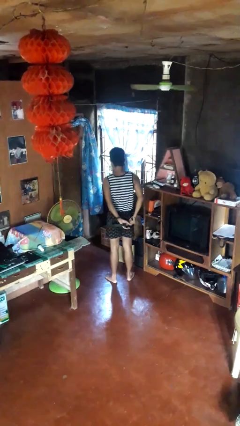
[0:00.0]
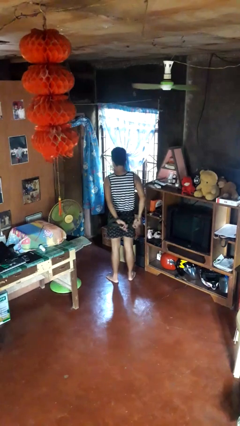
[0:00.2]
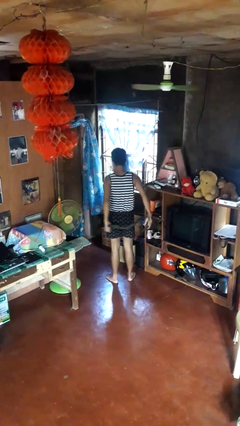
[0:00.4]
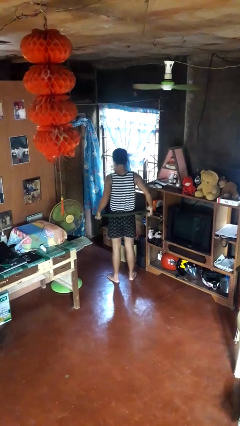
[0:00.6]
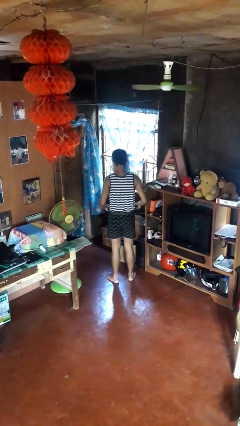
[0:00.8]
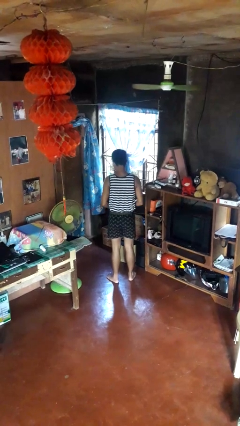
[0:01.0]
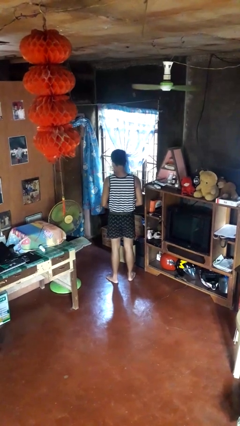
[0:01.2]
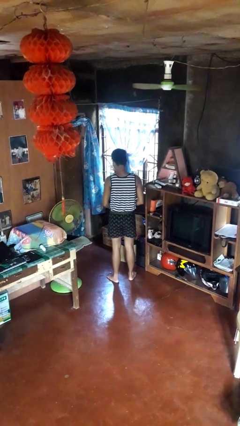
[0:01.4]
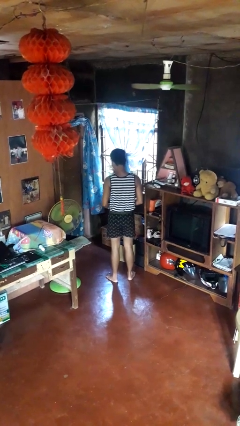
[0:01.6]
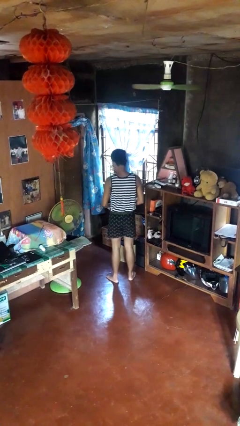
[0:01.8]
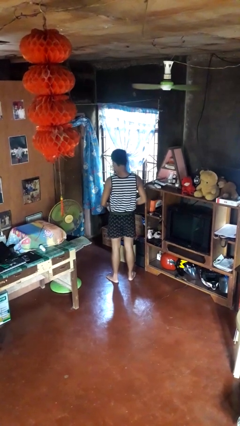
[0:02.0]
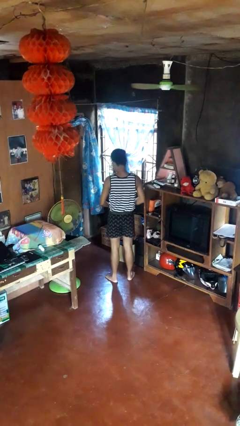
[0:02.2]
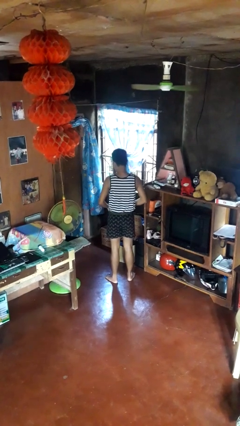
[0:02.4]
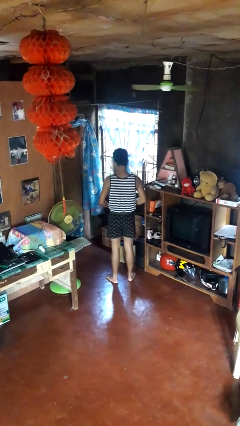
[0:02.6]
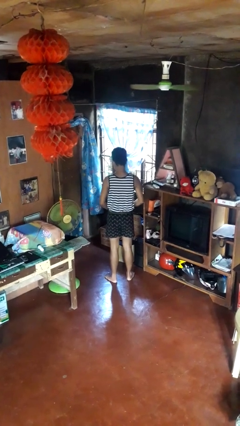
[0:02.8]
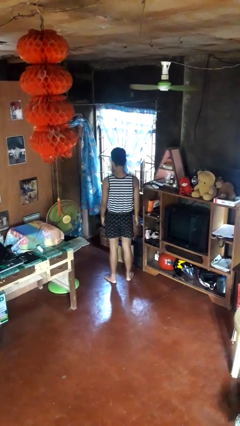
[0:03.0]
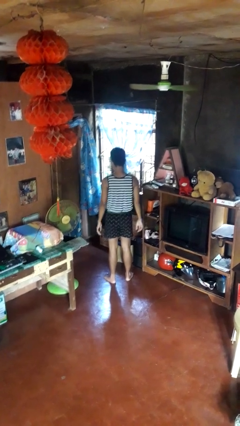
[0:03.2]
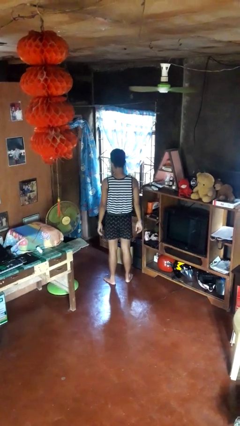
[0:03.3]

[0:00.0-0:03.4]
person puts on belt

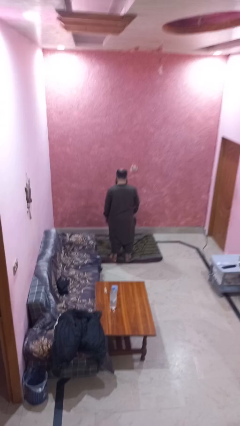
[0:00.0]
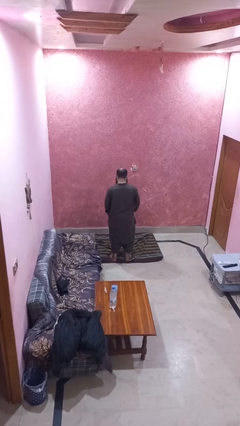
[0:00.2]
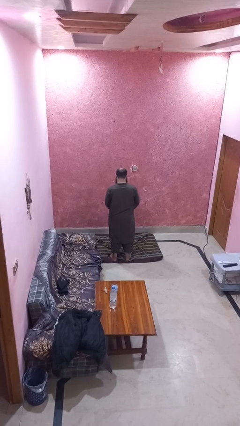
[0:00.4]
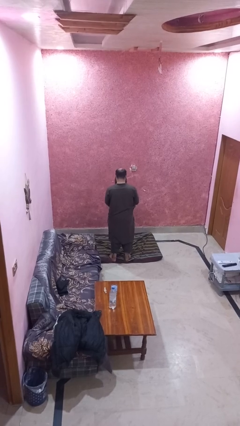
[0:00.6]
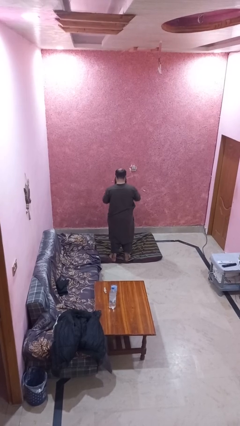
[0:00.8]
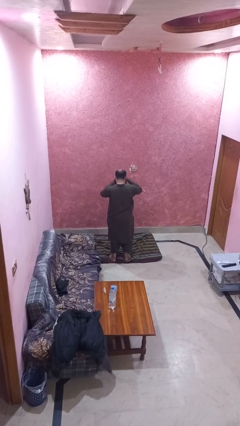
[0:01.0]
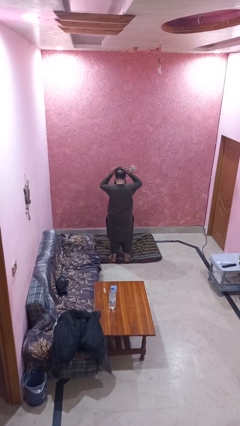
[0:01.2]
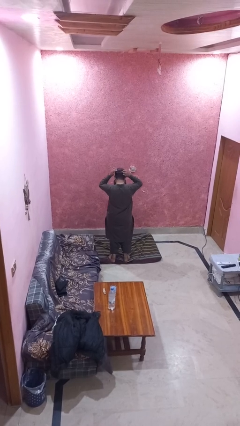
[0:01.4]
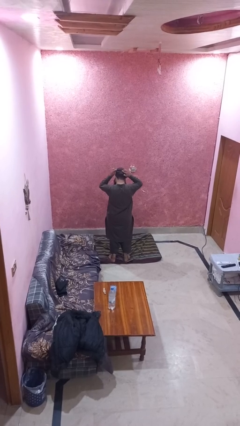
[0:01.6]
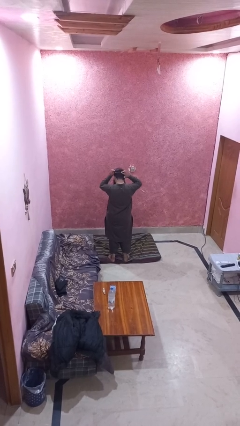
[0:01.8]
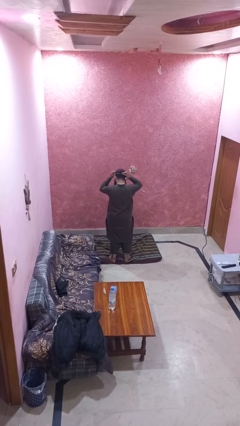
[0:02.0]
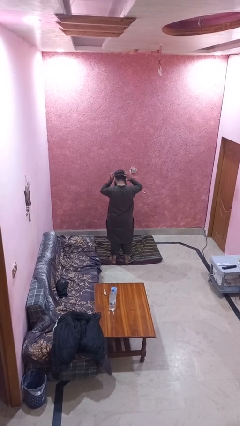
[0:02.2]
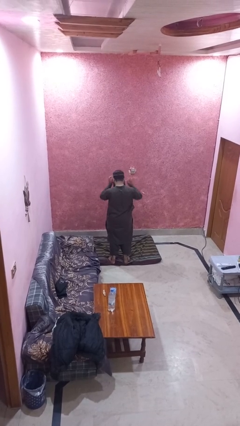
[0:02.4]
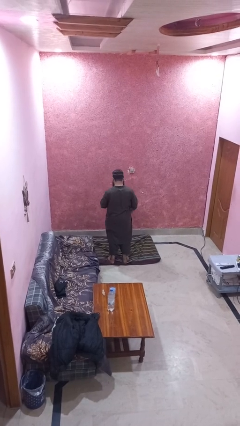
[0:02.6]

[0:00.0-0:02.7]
person puts on hat

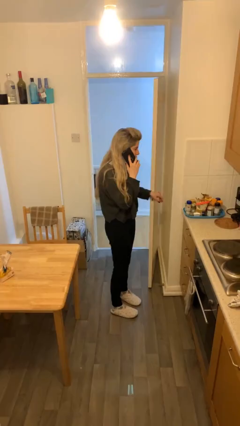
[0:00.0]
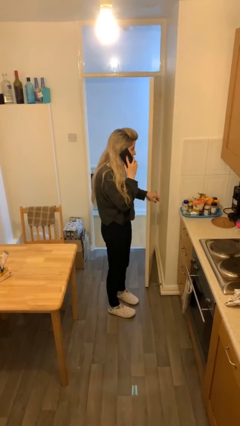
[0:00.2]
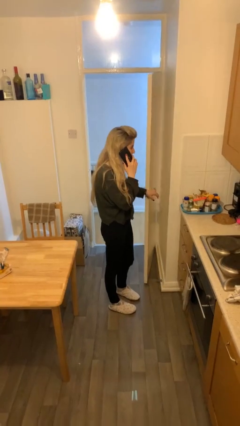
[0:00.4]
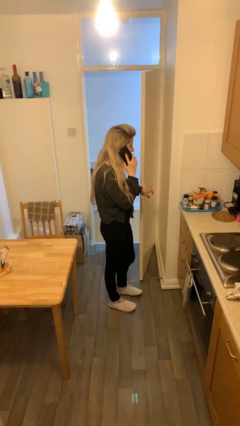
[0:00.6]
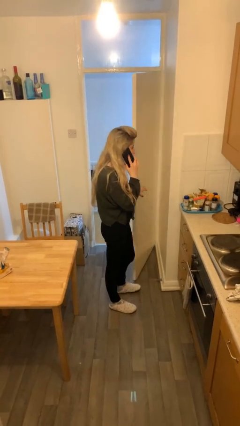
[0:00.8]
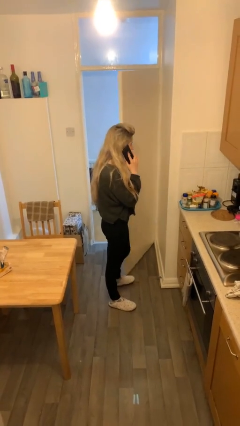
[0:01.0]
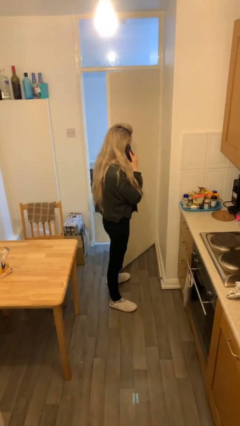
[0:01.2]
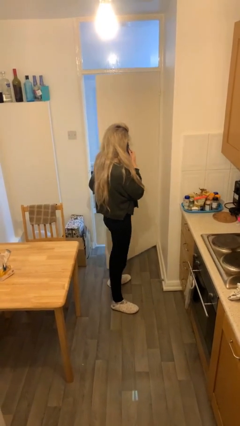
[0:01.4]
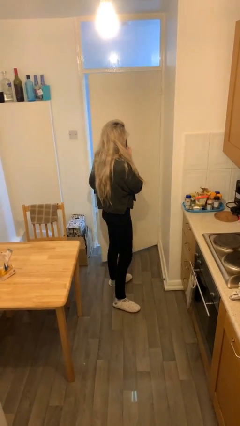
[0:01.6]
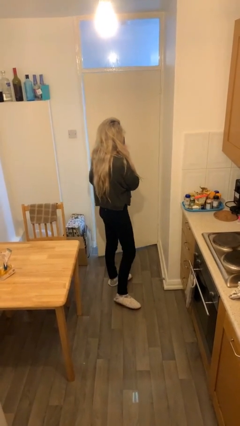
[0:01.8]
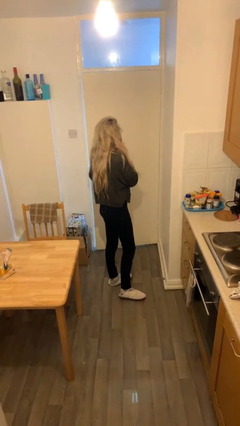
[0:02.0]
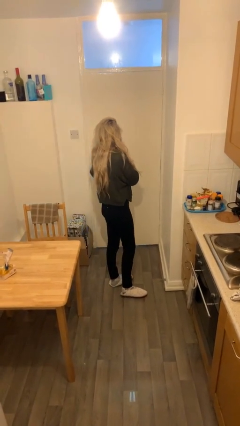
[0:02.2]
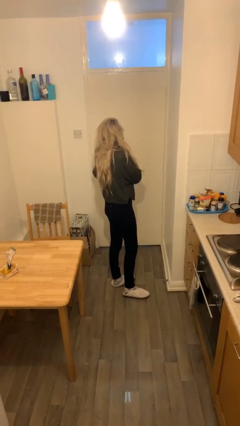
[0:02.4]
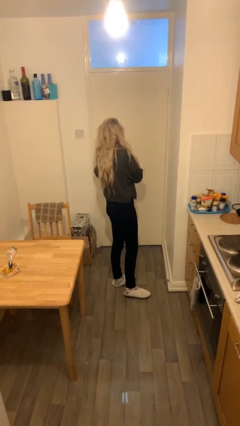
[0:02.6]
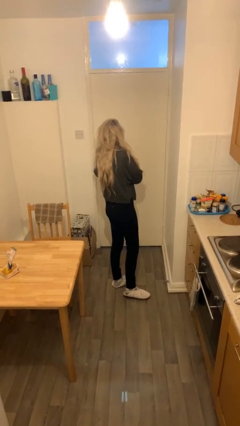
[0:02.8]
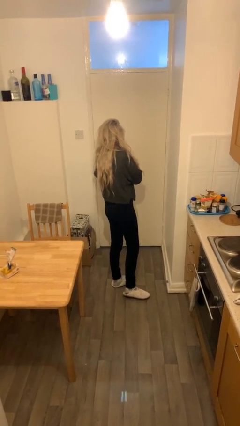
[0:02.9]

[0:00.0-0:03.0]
person closes facility door

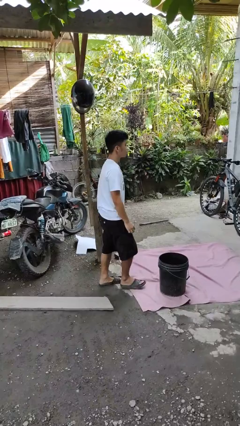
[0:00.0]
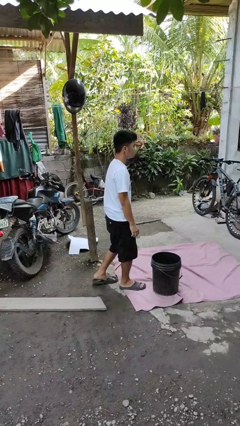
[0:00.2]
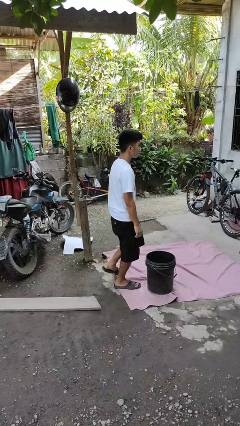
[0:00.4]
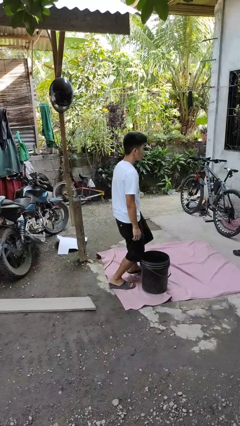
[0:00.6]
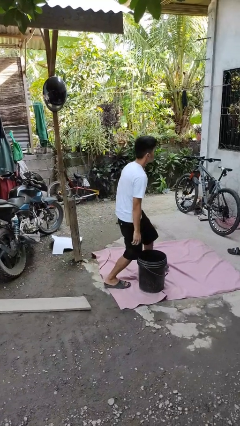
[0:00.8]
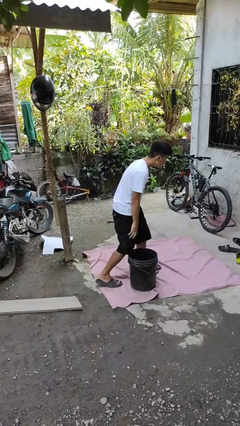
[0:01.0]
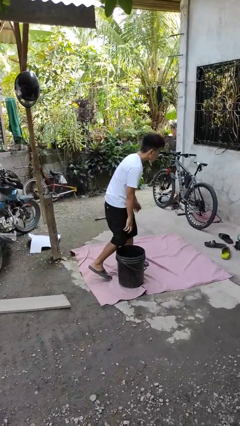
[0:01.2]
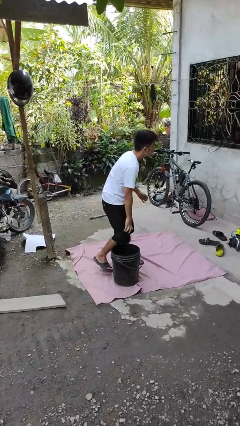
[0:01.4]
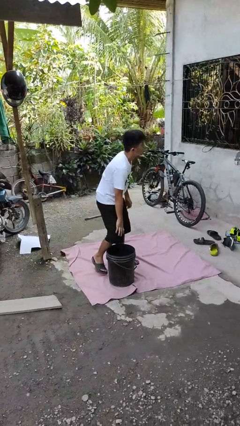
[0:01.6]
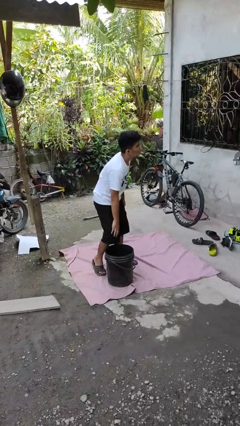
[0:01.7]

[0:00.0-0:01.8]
person trips on object on floor

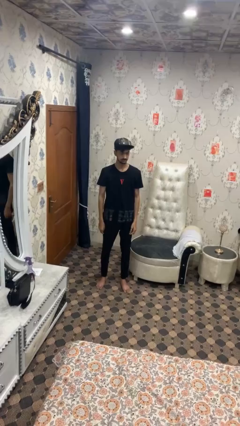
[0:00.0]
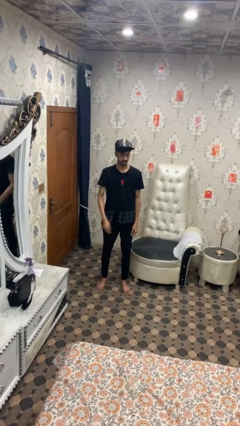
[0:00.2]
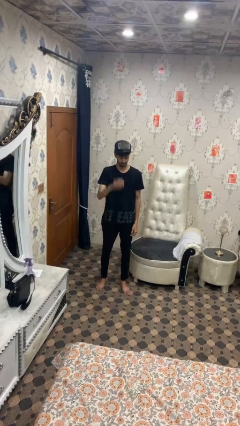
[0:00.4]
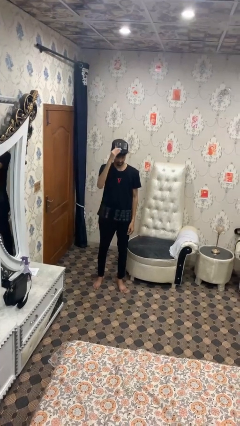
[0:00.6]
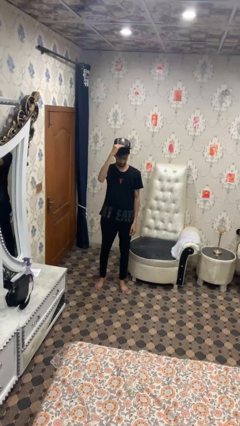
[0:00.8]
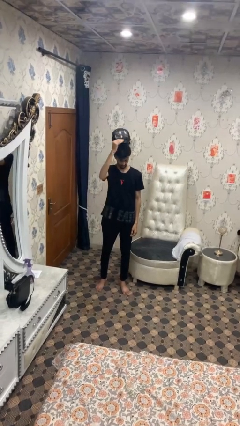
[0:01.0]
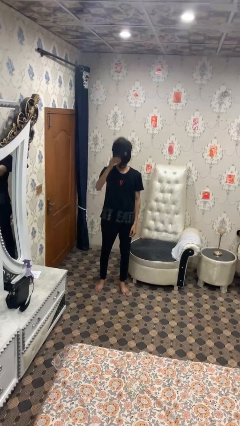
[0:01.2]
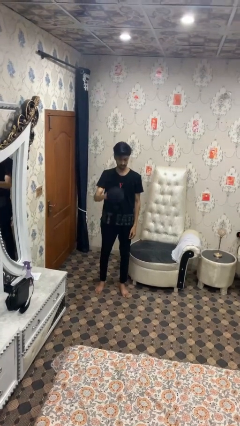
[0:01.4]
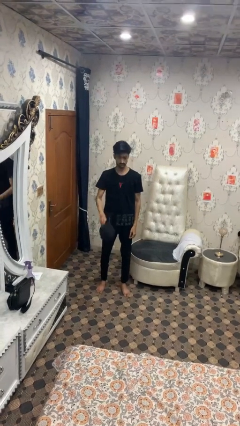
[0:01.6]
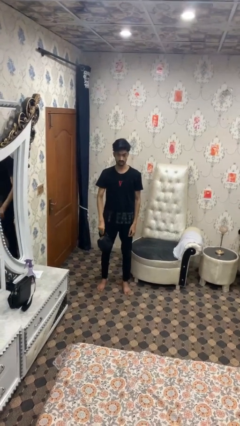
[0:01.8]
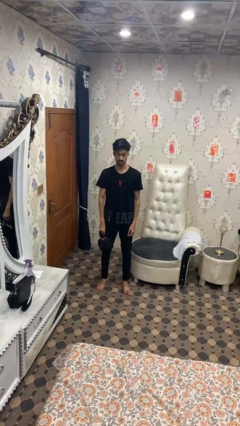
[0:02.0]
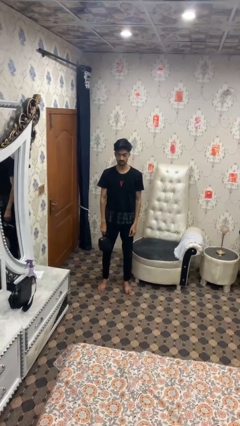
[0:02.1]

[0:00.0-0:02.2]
person takes off hat

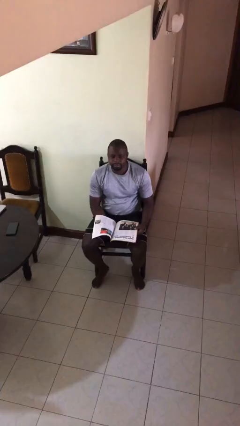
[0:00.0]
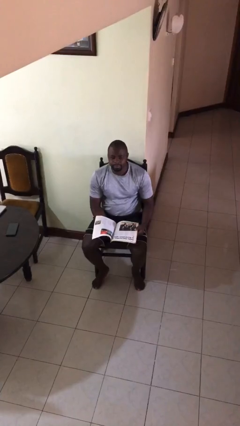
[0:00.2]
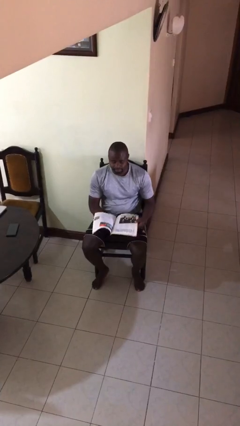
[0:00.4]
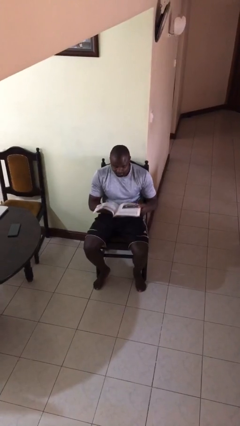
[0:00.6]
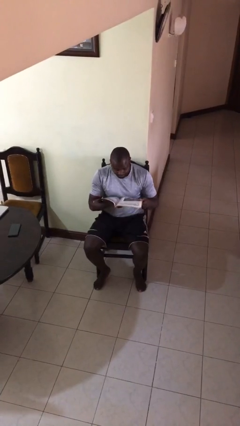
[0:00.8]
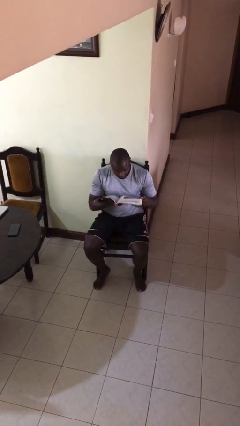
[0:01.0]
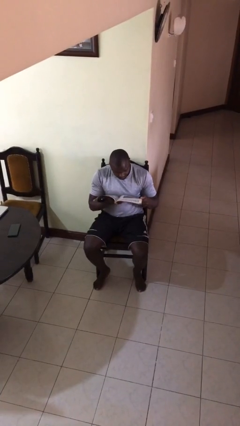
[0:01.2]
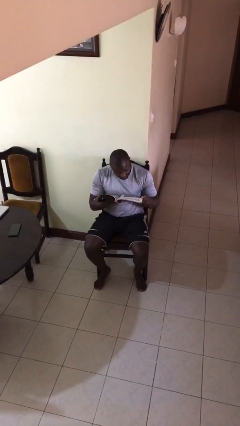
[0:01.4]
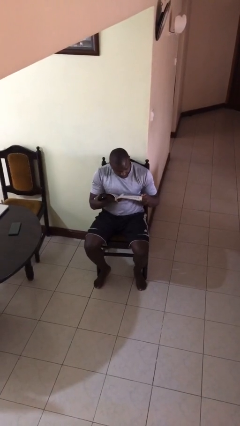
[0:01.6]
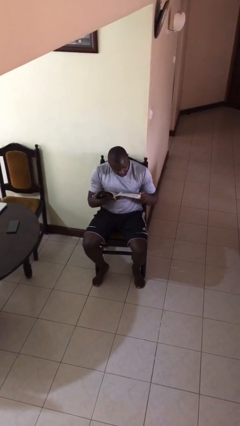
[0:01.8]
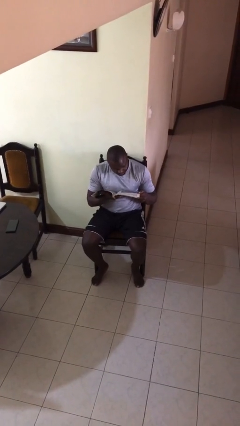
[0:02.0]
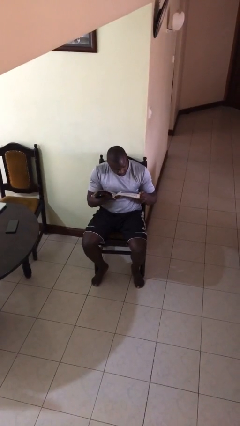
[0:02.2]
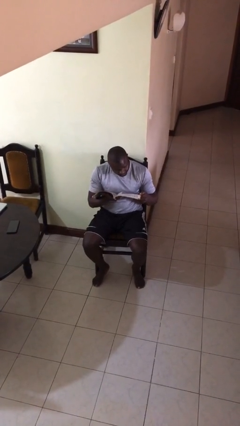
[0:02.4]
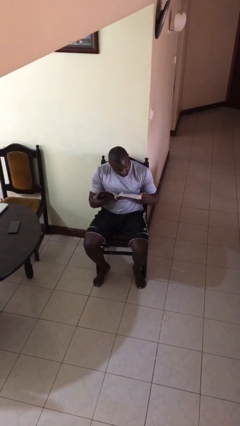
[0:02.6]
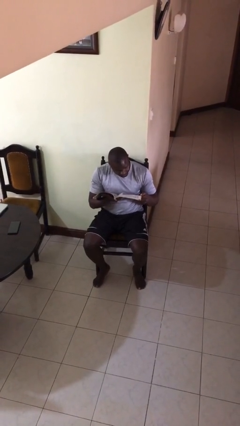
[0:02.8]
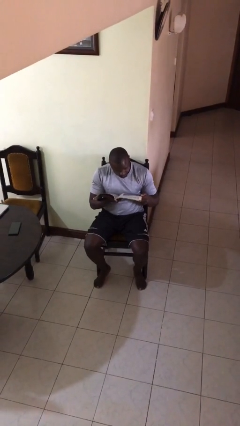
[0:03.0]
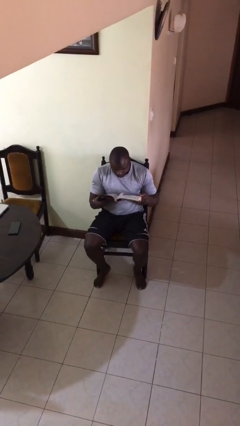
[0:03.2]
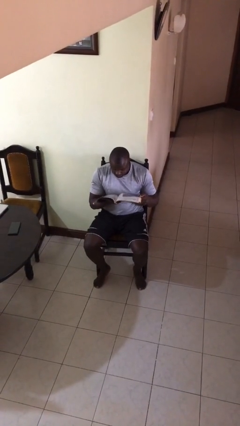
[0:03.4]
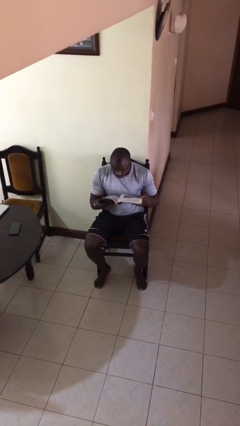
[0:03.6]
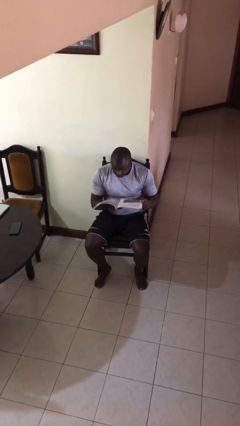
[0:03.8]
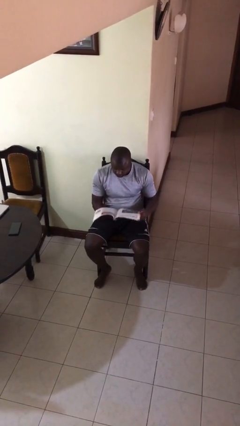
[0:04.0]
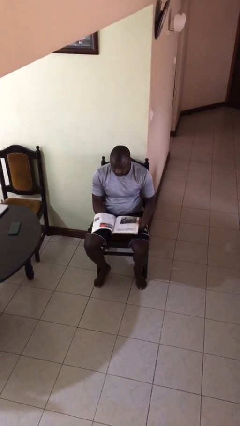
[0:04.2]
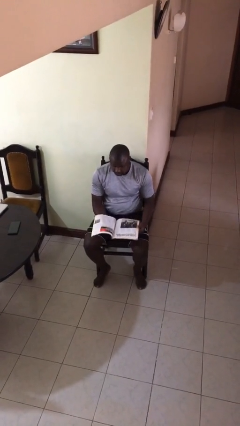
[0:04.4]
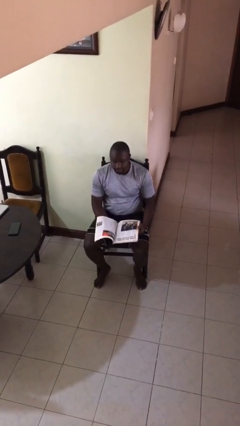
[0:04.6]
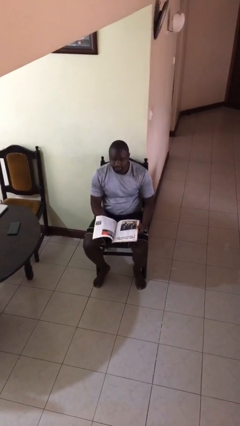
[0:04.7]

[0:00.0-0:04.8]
person reads document
